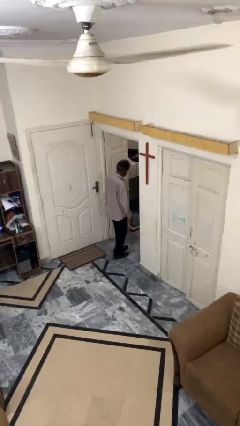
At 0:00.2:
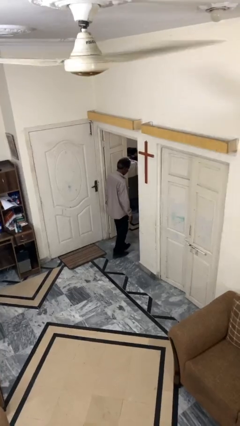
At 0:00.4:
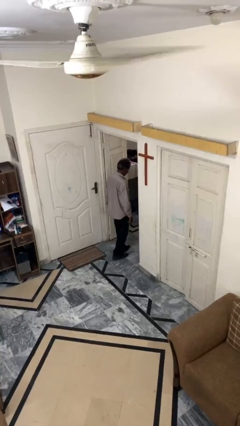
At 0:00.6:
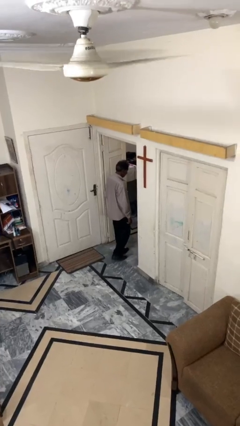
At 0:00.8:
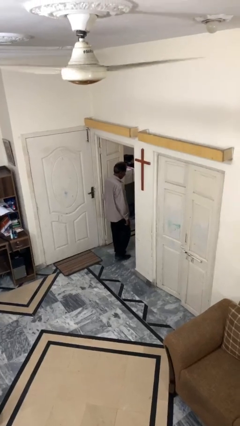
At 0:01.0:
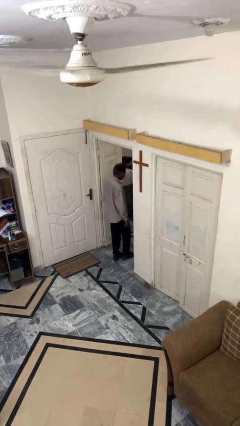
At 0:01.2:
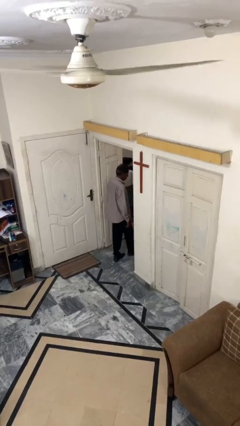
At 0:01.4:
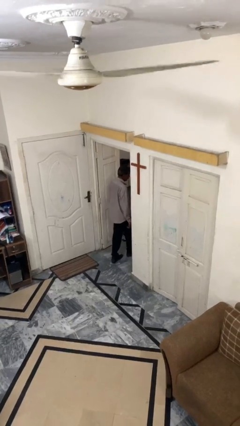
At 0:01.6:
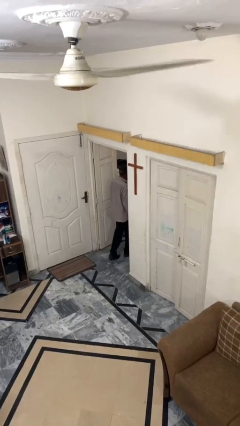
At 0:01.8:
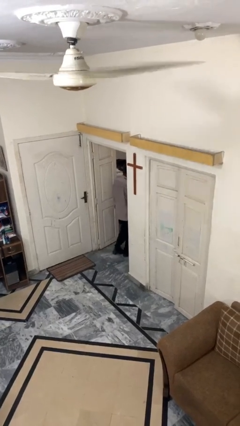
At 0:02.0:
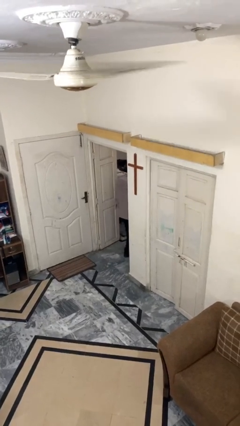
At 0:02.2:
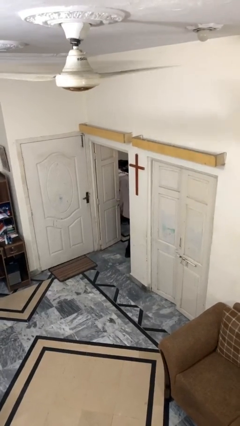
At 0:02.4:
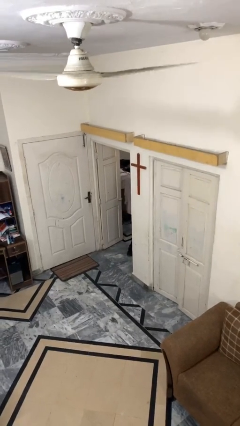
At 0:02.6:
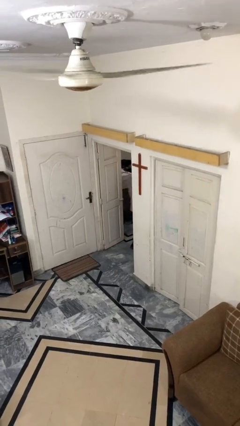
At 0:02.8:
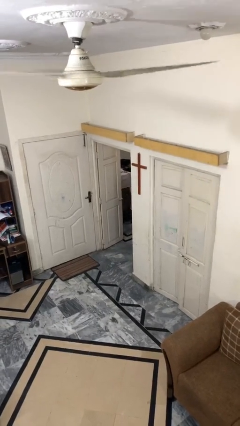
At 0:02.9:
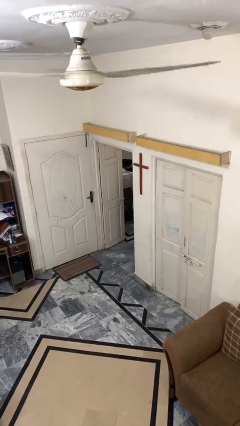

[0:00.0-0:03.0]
person exits scene through structure

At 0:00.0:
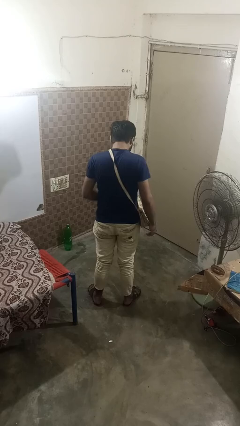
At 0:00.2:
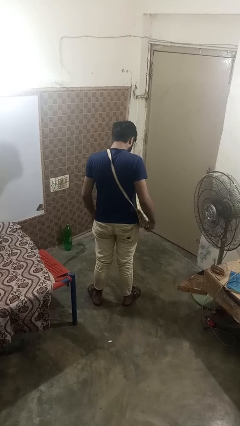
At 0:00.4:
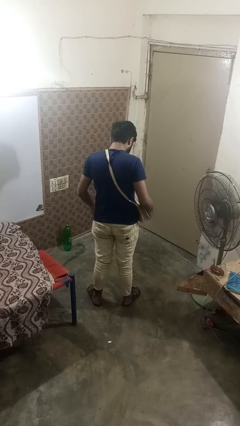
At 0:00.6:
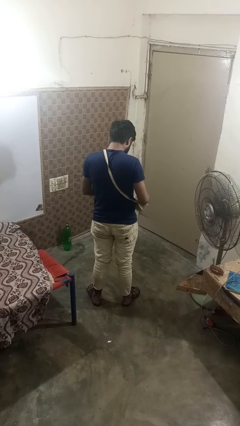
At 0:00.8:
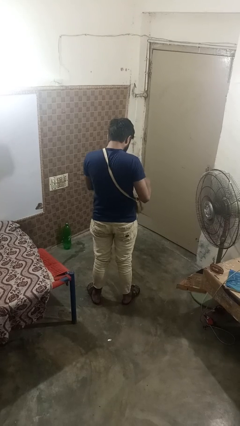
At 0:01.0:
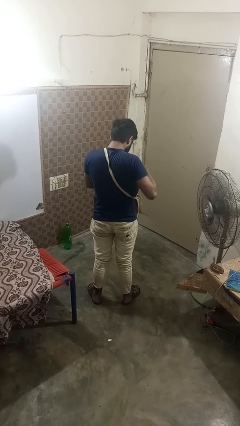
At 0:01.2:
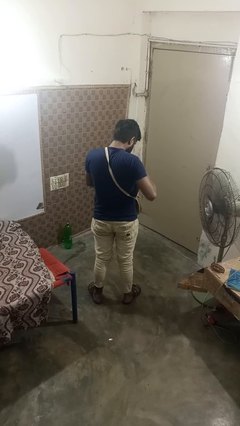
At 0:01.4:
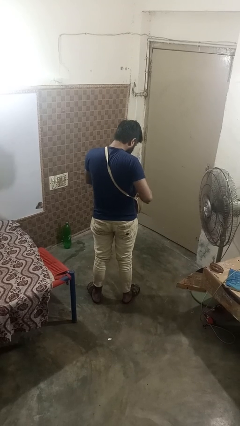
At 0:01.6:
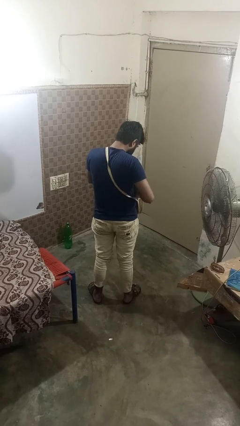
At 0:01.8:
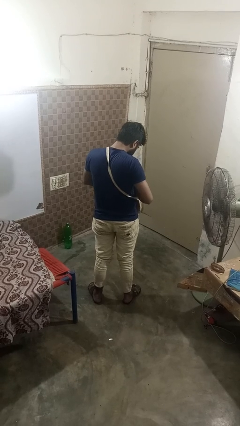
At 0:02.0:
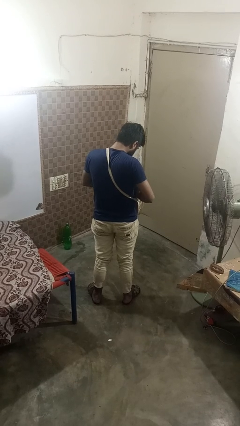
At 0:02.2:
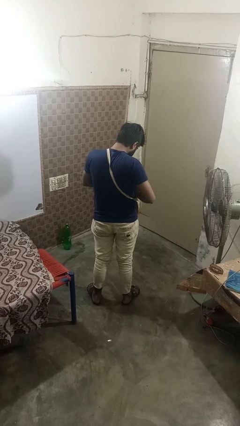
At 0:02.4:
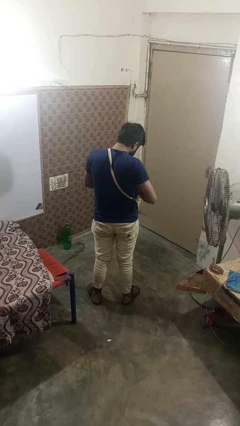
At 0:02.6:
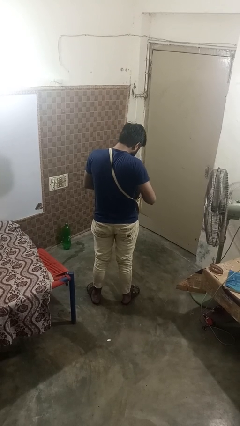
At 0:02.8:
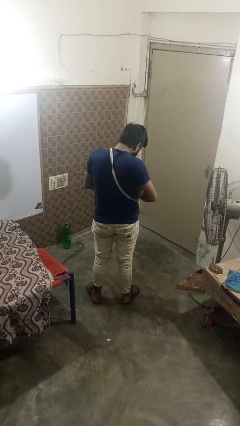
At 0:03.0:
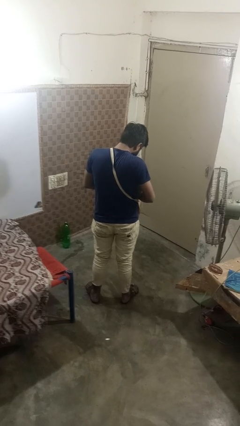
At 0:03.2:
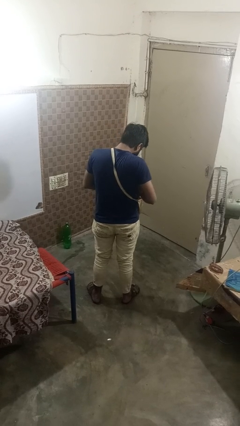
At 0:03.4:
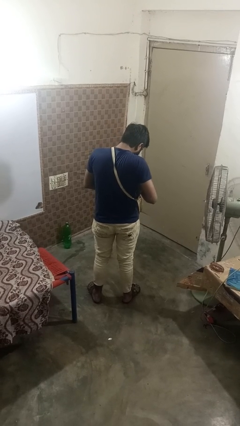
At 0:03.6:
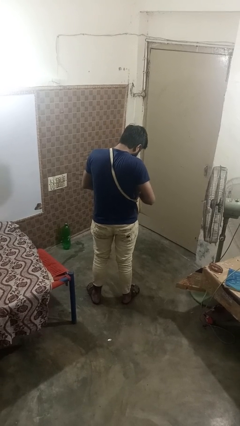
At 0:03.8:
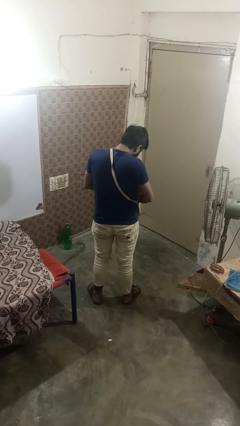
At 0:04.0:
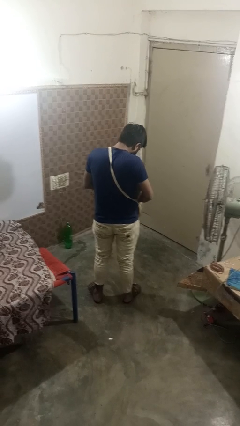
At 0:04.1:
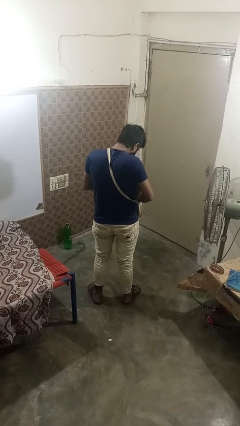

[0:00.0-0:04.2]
person searches in purse

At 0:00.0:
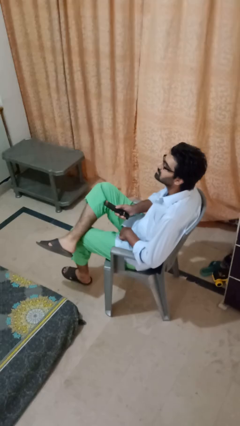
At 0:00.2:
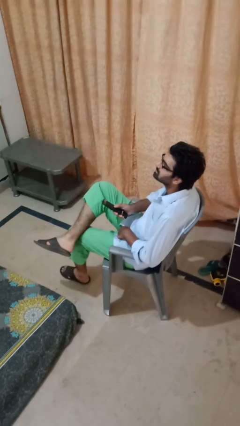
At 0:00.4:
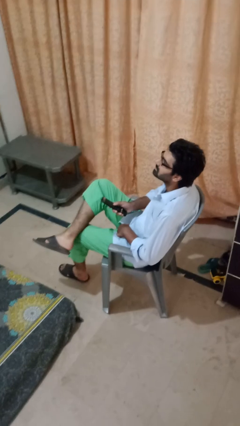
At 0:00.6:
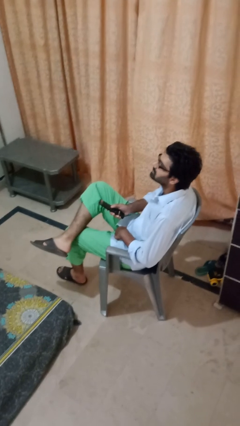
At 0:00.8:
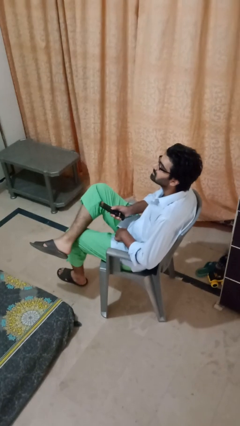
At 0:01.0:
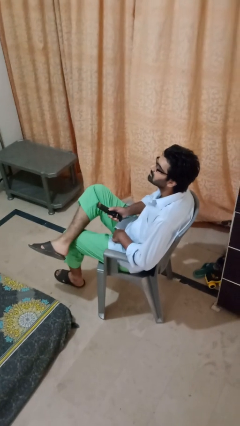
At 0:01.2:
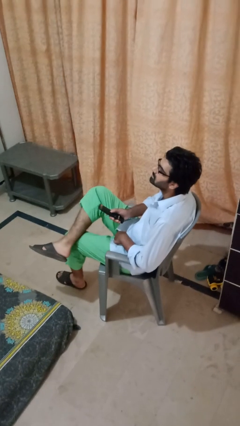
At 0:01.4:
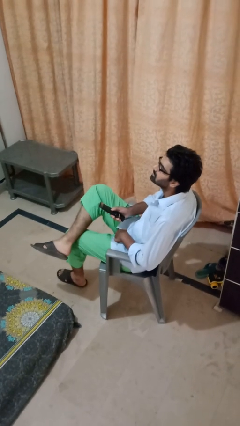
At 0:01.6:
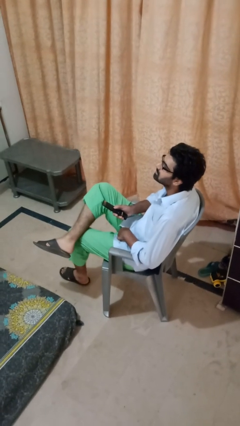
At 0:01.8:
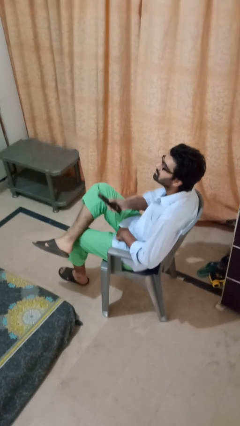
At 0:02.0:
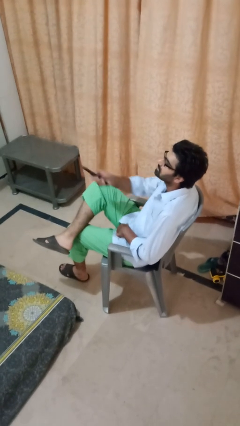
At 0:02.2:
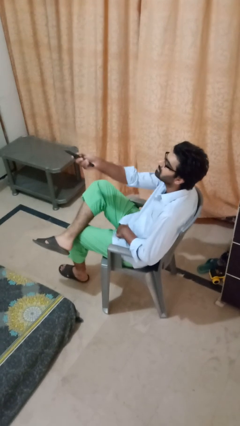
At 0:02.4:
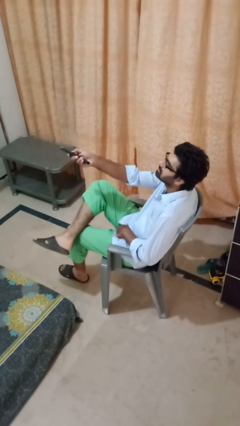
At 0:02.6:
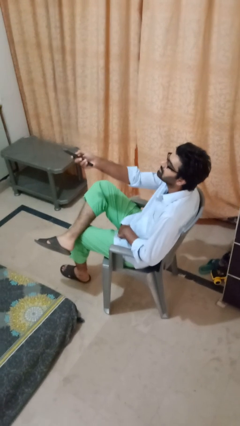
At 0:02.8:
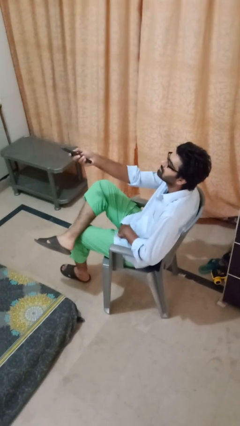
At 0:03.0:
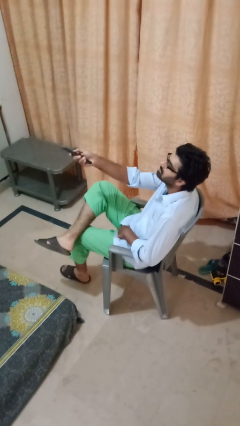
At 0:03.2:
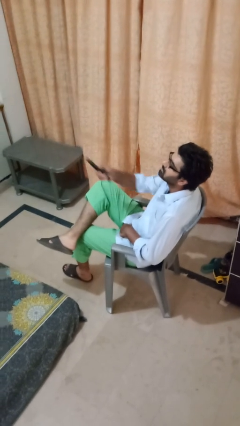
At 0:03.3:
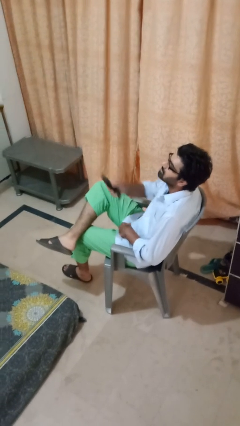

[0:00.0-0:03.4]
person uses television remote

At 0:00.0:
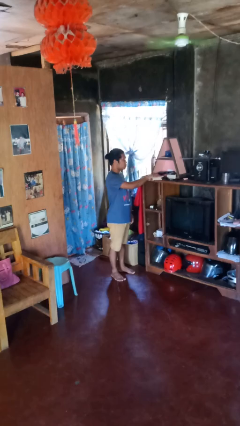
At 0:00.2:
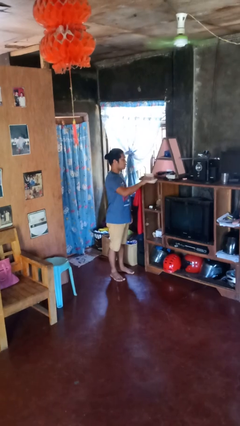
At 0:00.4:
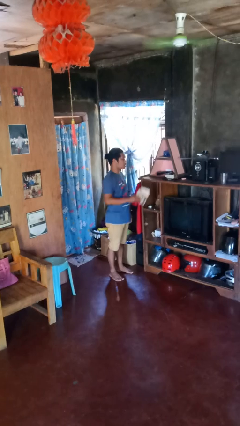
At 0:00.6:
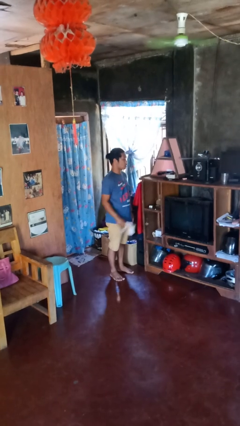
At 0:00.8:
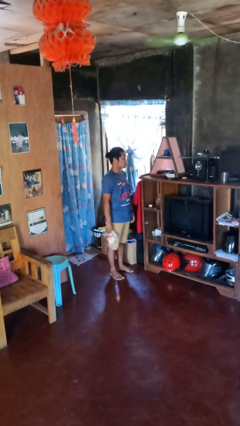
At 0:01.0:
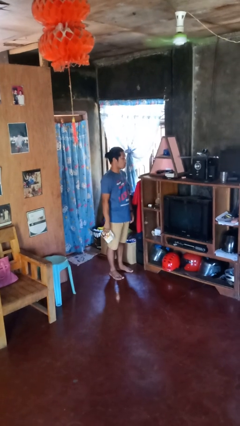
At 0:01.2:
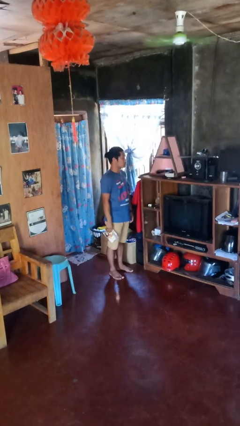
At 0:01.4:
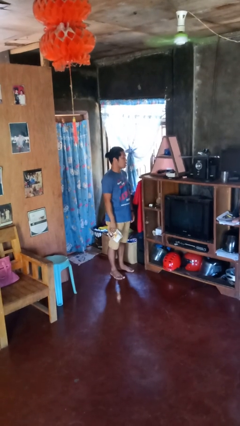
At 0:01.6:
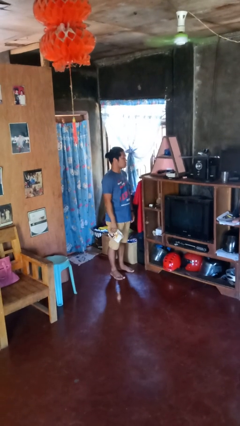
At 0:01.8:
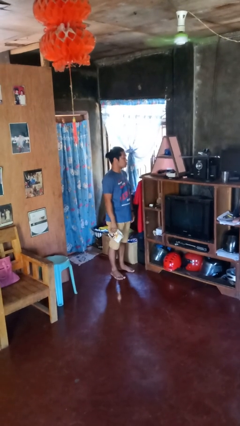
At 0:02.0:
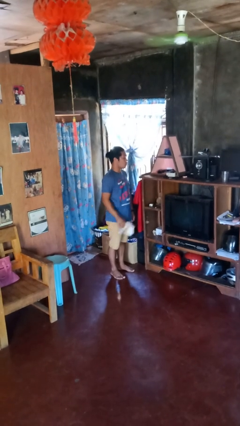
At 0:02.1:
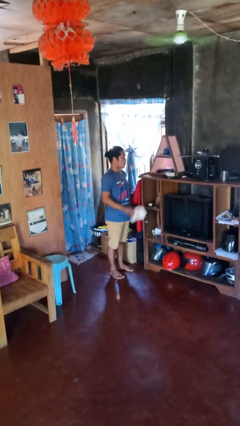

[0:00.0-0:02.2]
person picks up object from shelf

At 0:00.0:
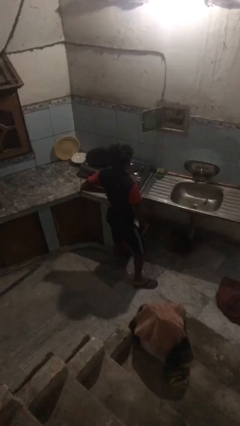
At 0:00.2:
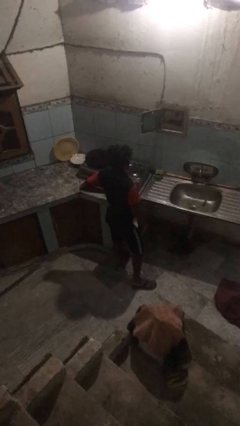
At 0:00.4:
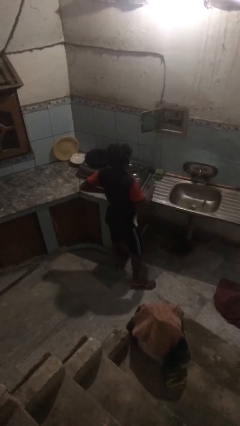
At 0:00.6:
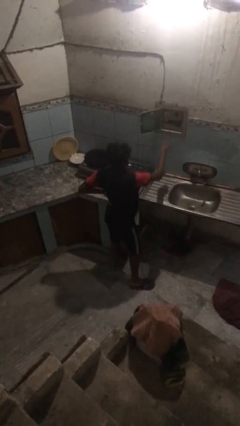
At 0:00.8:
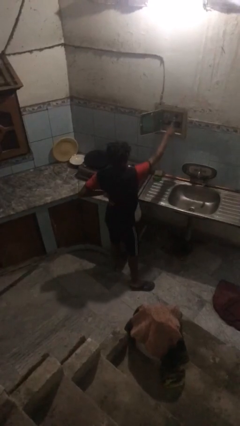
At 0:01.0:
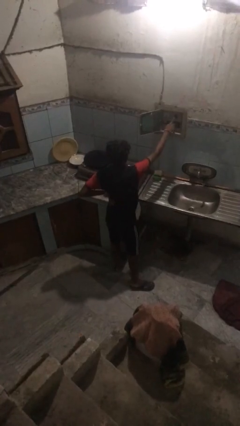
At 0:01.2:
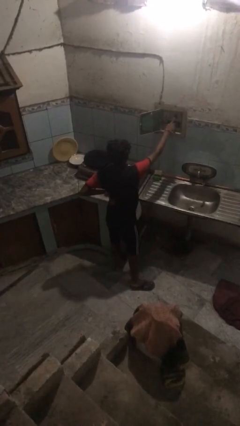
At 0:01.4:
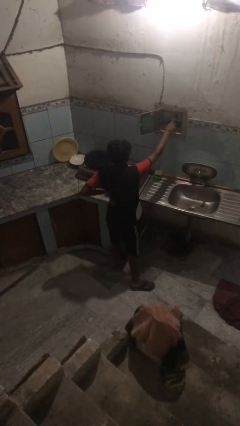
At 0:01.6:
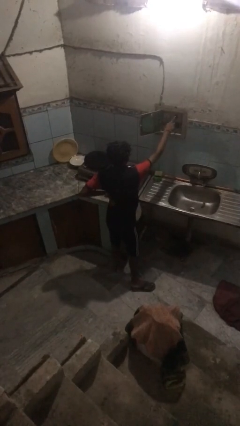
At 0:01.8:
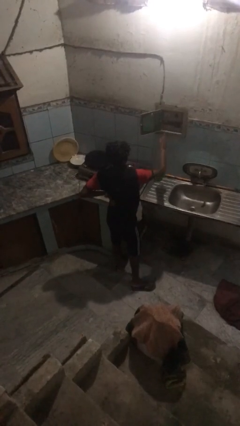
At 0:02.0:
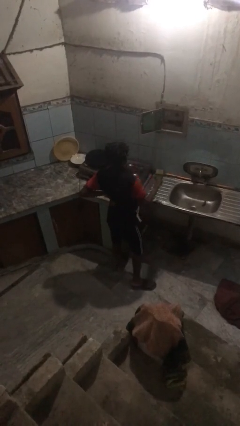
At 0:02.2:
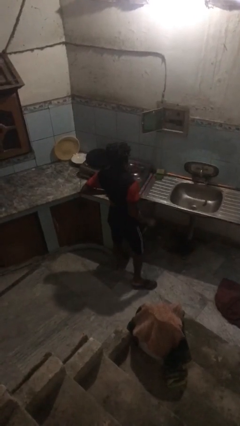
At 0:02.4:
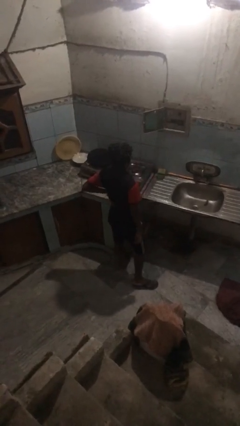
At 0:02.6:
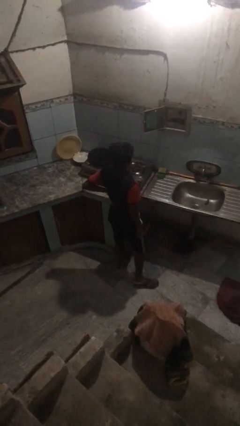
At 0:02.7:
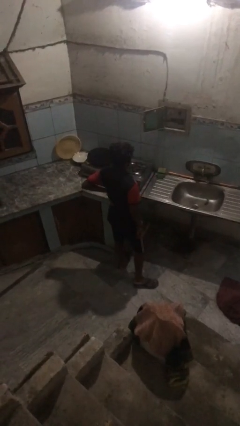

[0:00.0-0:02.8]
person puts up smoke detector

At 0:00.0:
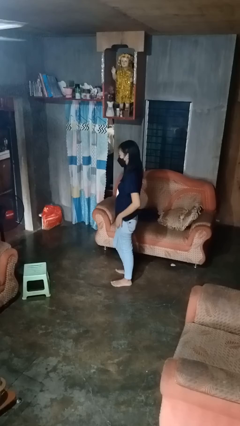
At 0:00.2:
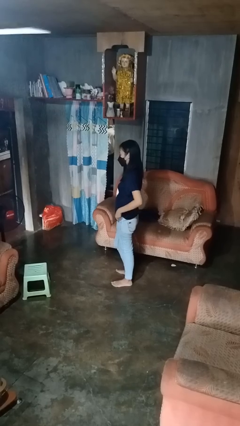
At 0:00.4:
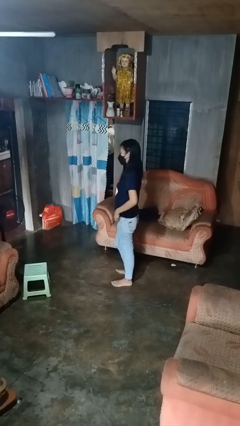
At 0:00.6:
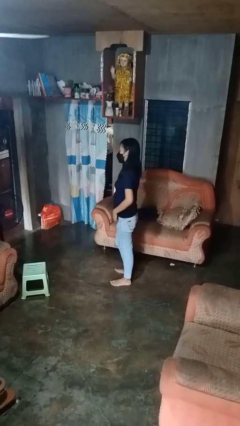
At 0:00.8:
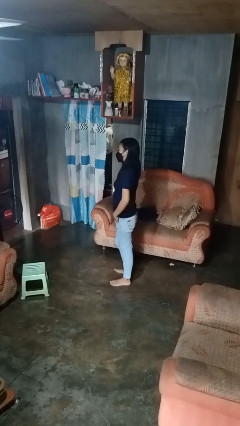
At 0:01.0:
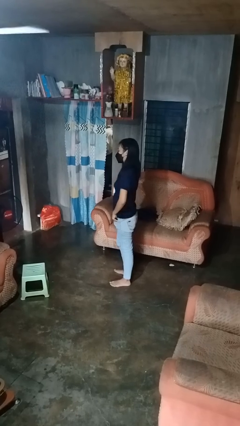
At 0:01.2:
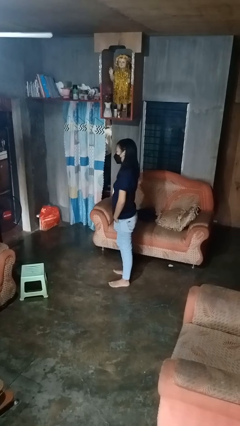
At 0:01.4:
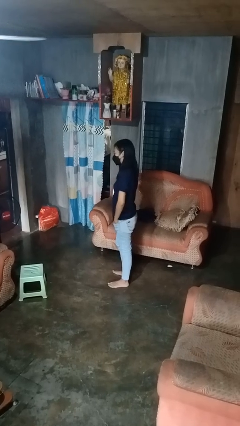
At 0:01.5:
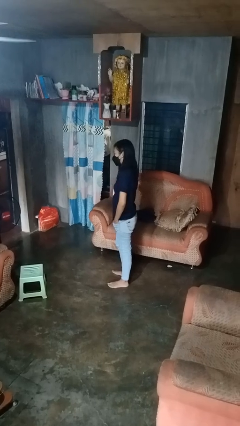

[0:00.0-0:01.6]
person puts hands in back pockets
